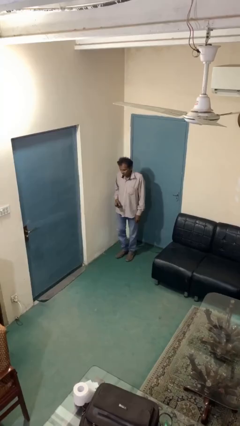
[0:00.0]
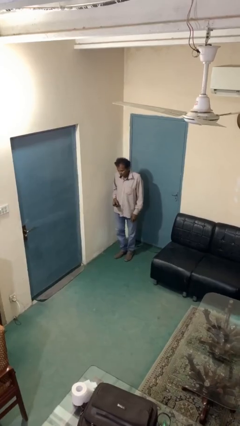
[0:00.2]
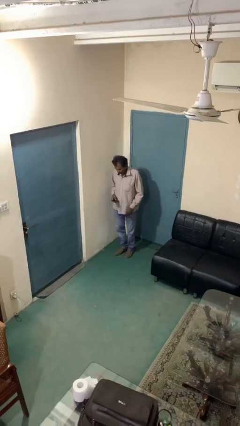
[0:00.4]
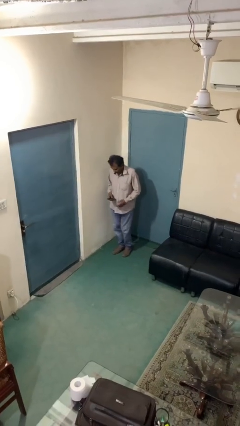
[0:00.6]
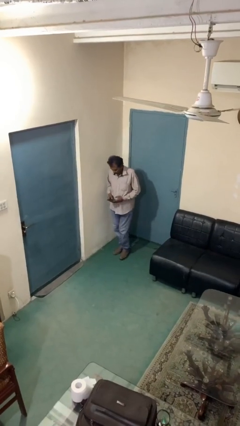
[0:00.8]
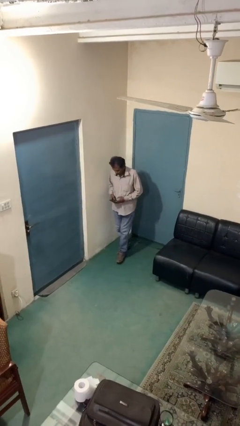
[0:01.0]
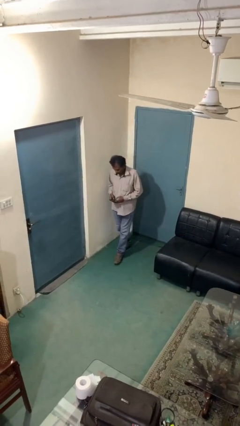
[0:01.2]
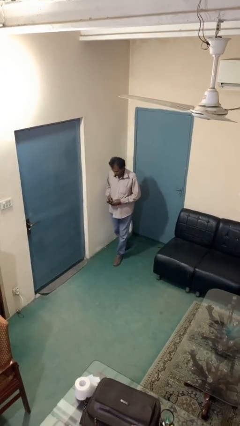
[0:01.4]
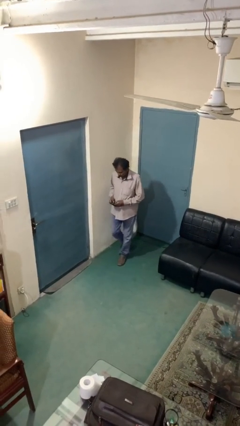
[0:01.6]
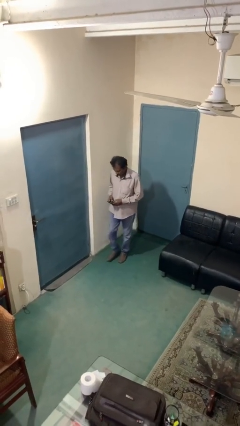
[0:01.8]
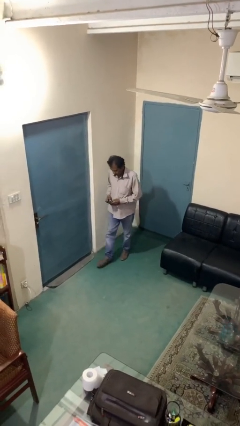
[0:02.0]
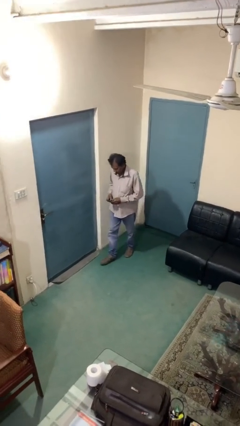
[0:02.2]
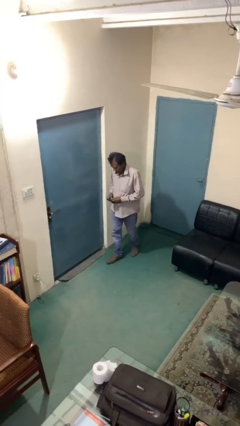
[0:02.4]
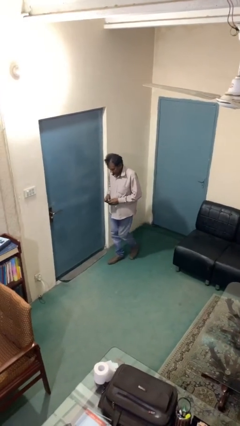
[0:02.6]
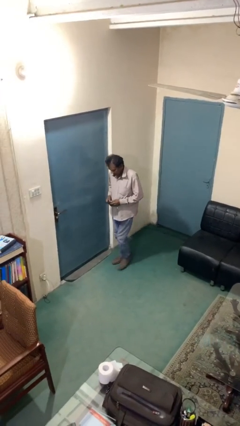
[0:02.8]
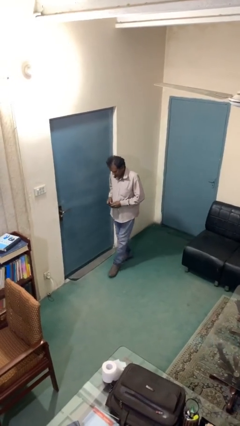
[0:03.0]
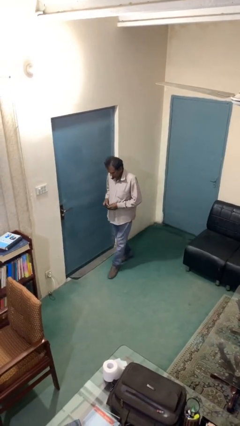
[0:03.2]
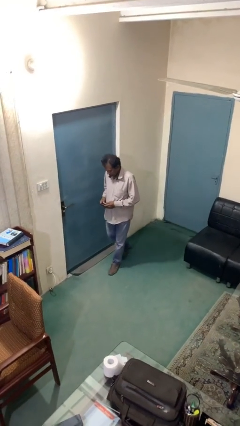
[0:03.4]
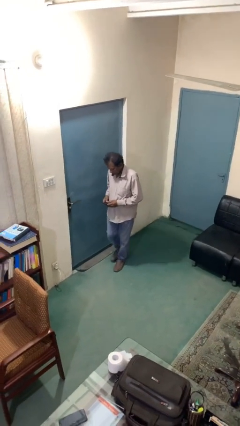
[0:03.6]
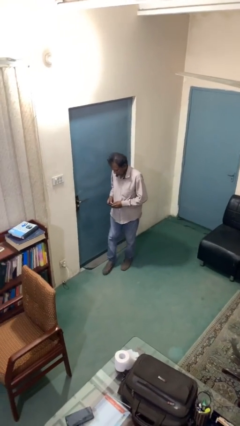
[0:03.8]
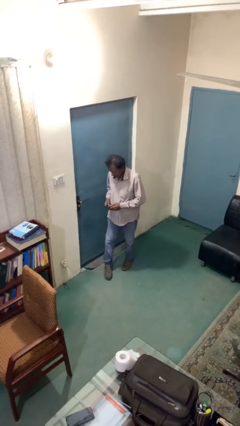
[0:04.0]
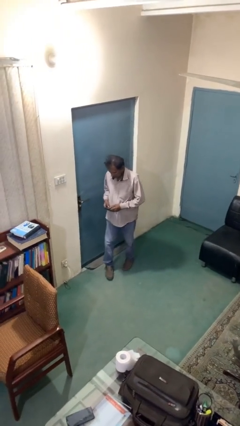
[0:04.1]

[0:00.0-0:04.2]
person texts on phone

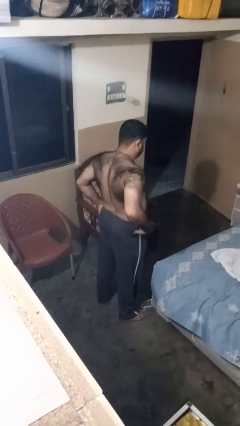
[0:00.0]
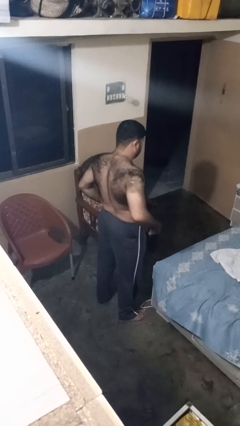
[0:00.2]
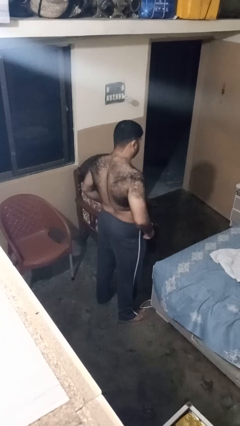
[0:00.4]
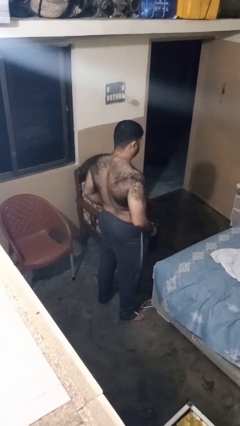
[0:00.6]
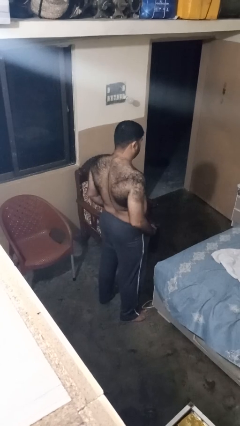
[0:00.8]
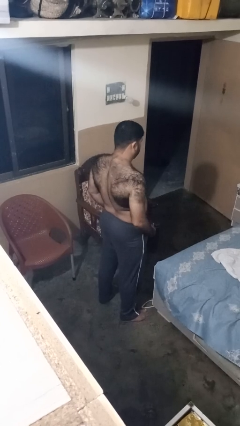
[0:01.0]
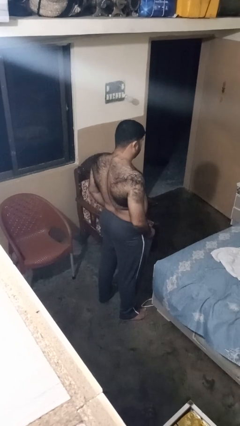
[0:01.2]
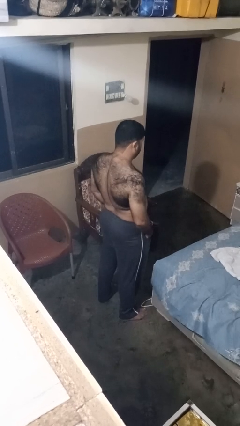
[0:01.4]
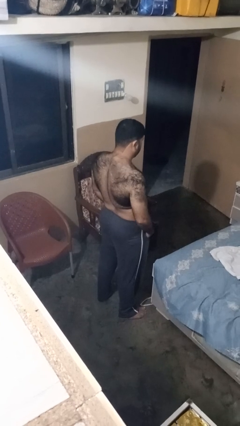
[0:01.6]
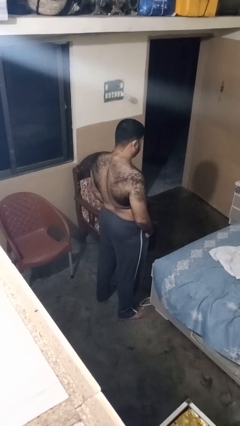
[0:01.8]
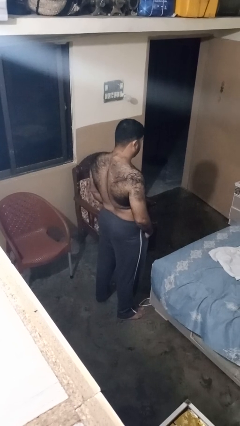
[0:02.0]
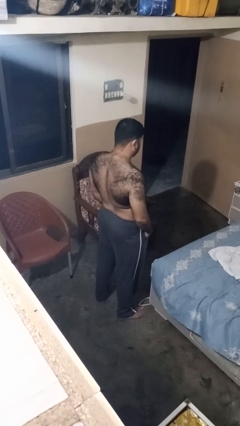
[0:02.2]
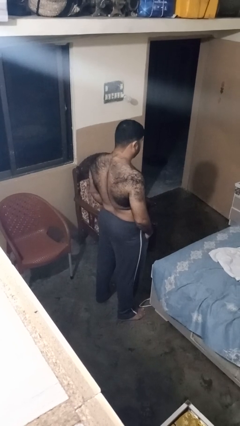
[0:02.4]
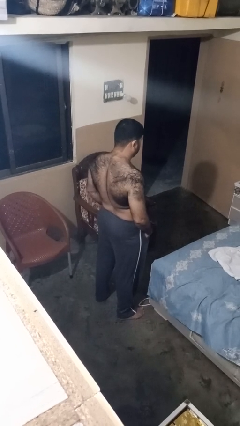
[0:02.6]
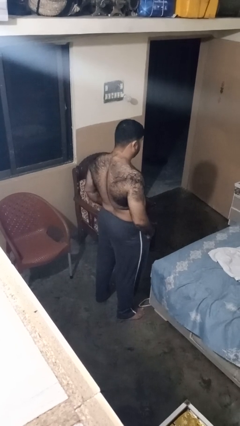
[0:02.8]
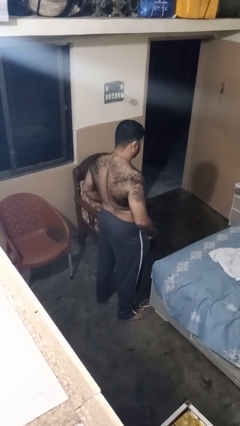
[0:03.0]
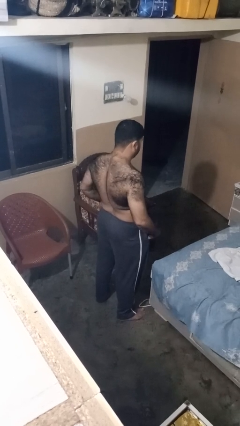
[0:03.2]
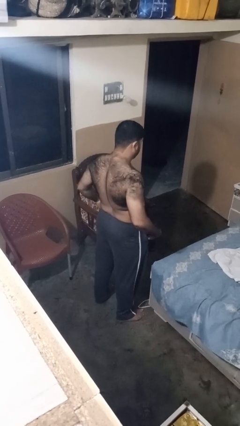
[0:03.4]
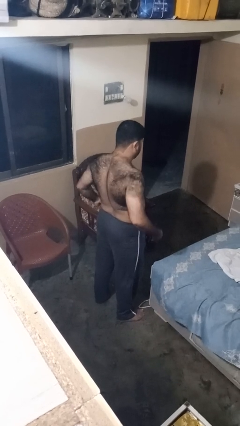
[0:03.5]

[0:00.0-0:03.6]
person puts hands in back pockets

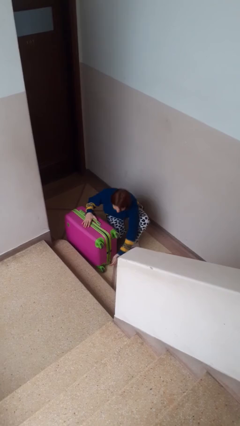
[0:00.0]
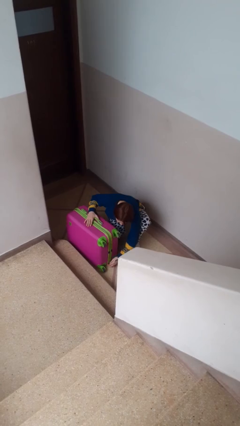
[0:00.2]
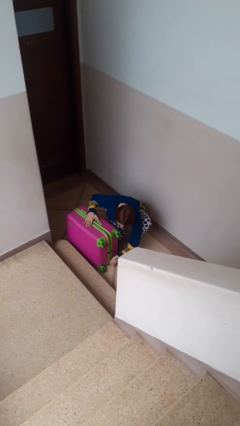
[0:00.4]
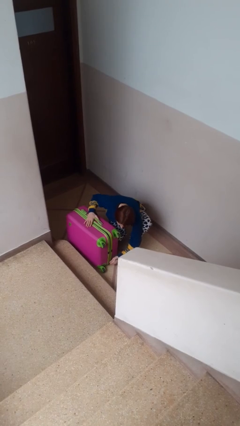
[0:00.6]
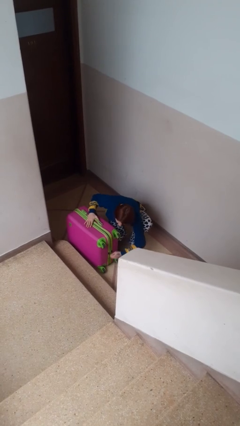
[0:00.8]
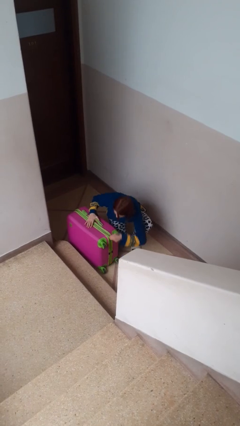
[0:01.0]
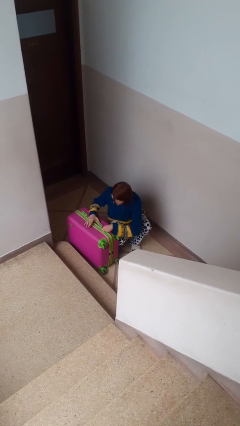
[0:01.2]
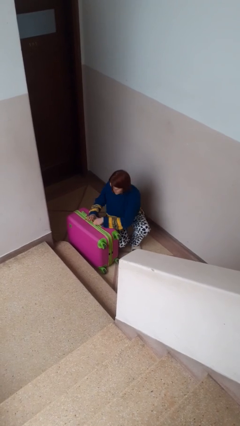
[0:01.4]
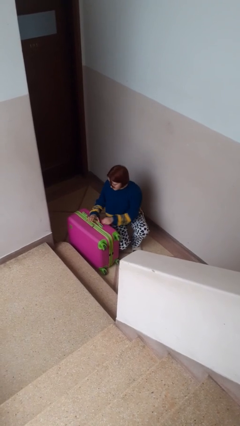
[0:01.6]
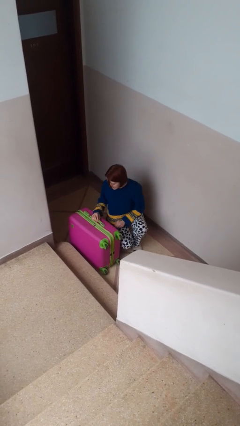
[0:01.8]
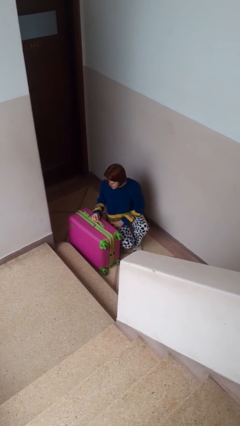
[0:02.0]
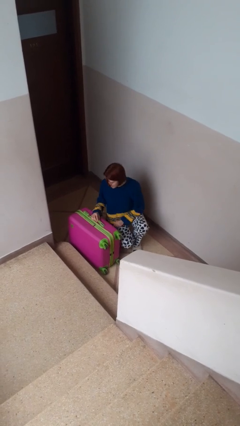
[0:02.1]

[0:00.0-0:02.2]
person closes suitcase

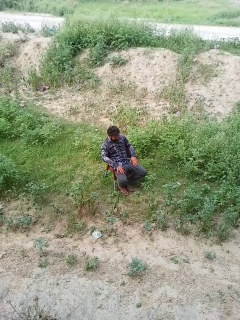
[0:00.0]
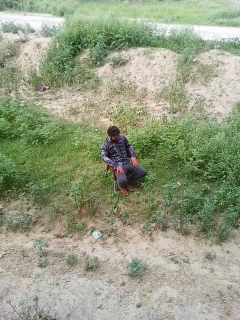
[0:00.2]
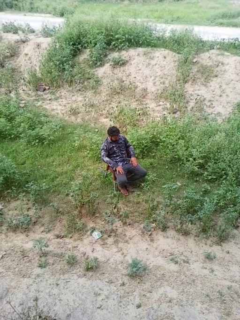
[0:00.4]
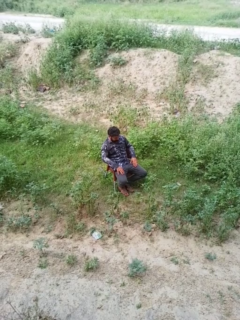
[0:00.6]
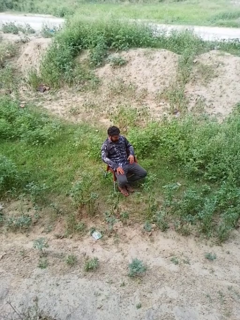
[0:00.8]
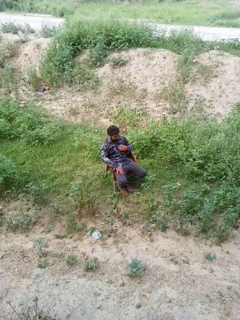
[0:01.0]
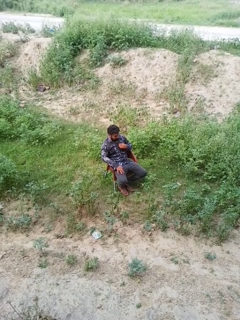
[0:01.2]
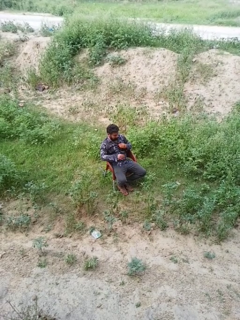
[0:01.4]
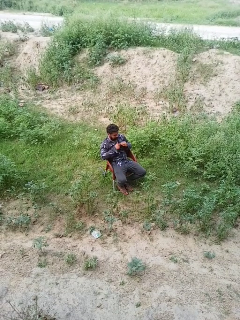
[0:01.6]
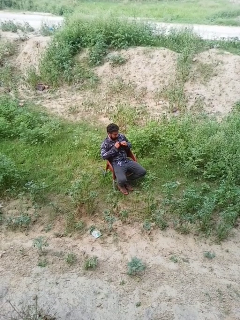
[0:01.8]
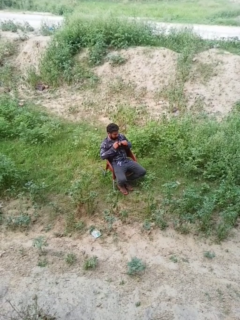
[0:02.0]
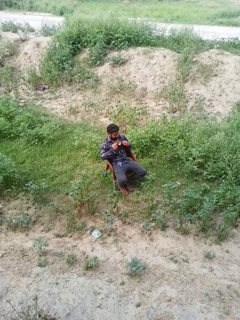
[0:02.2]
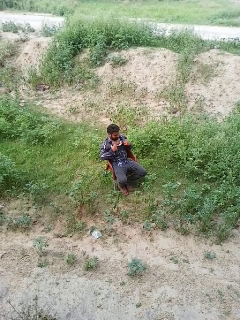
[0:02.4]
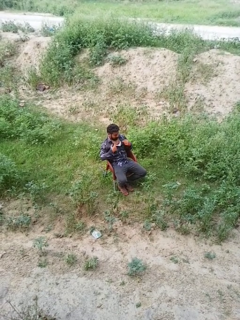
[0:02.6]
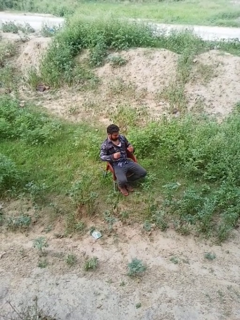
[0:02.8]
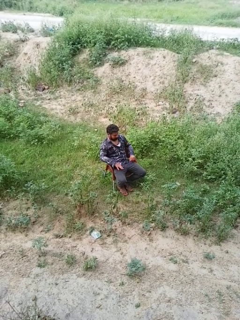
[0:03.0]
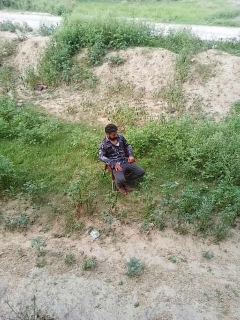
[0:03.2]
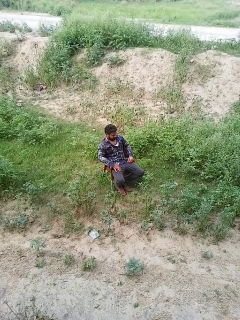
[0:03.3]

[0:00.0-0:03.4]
person unbuttons shirt

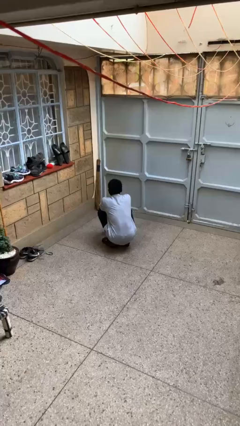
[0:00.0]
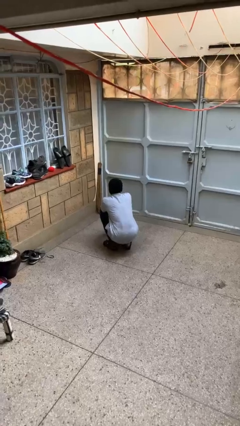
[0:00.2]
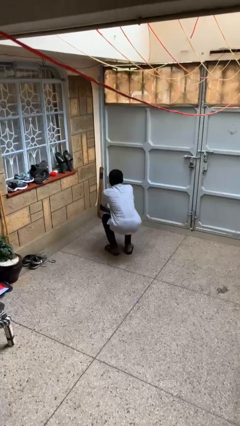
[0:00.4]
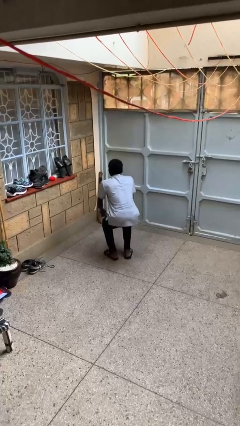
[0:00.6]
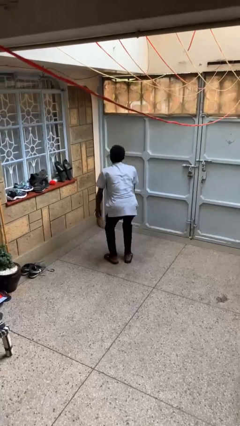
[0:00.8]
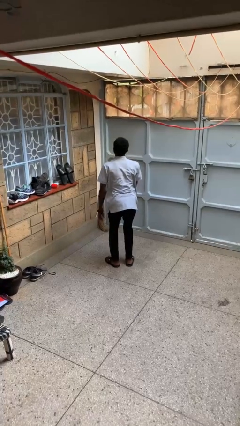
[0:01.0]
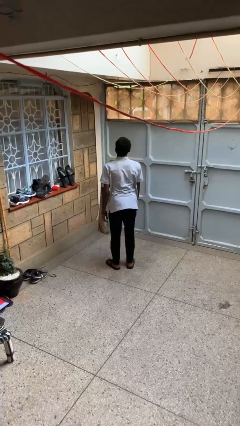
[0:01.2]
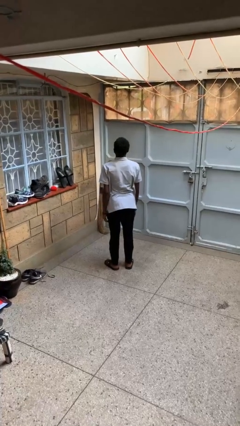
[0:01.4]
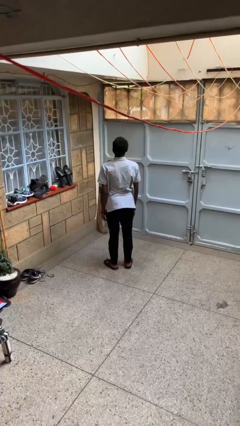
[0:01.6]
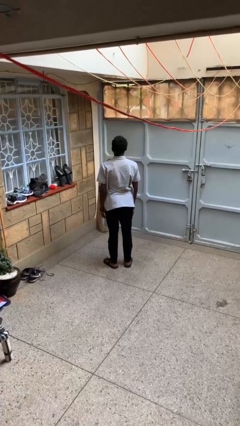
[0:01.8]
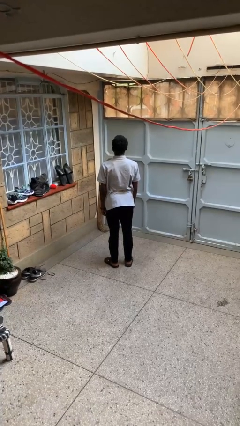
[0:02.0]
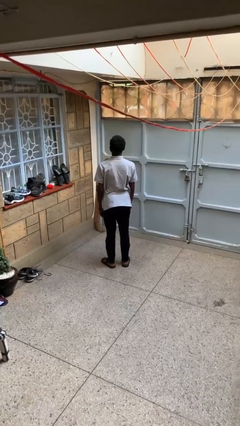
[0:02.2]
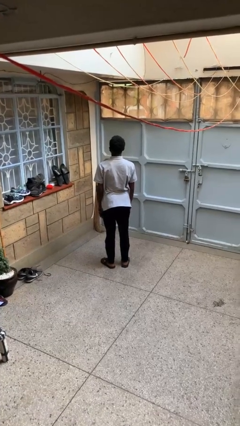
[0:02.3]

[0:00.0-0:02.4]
person stands up

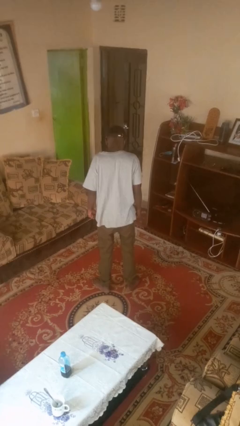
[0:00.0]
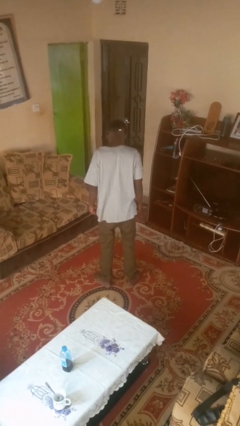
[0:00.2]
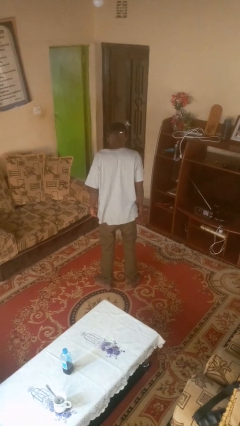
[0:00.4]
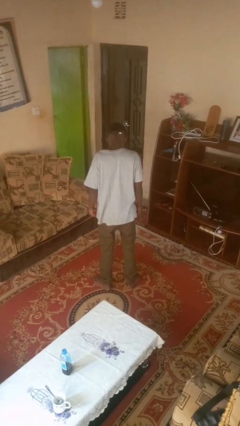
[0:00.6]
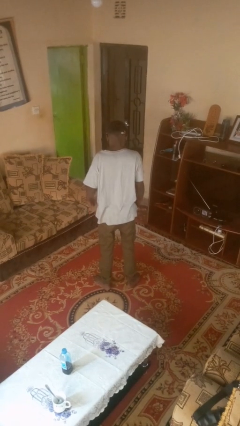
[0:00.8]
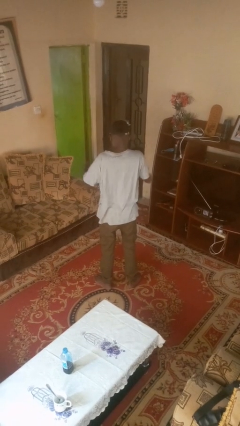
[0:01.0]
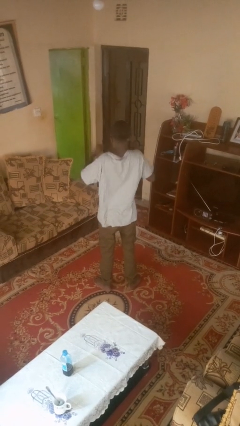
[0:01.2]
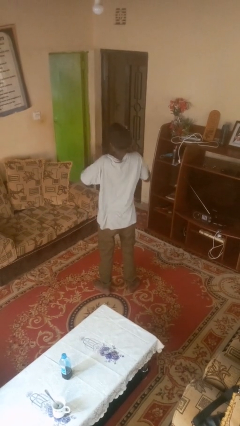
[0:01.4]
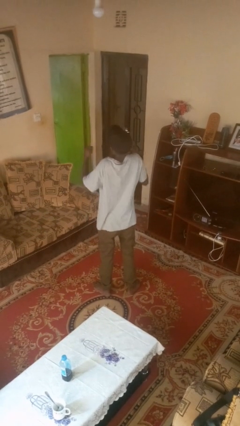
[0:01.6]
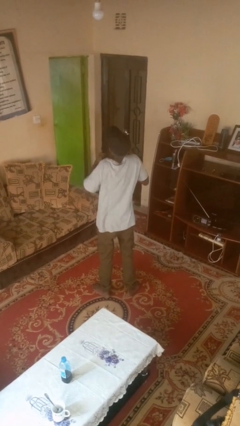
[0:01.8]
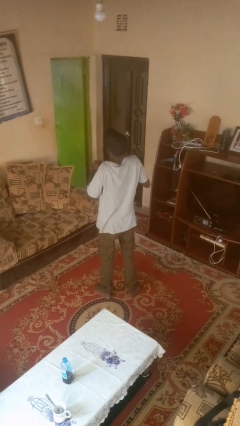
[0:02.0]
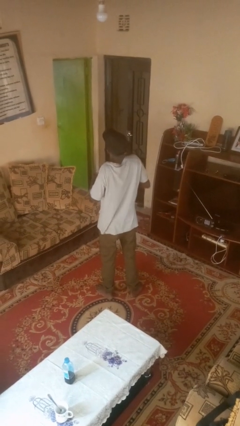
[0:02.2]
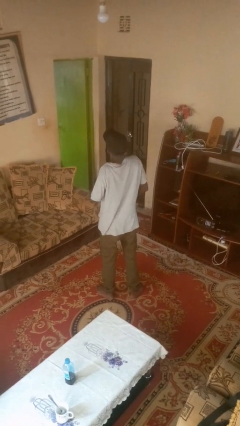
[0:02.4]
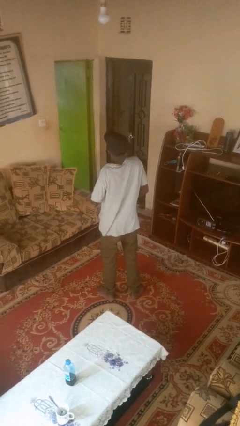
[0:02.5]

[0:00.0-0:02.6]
person drums on chest
